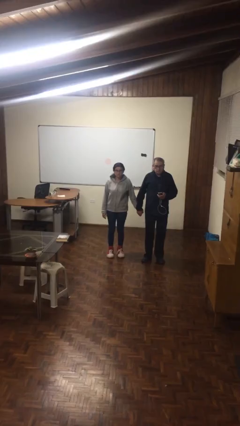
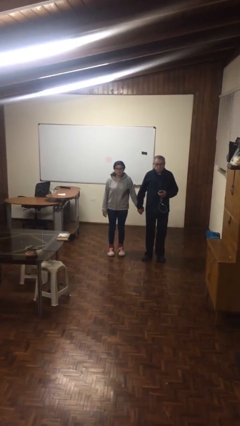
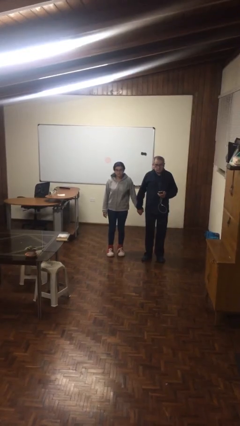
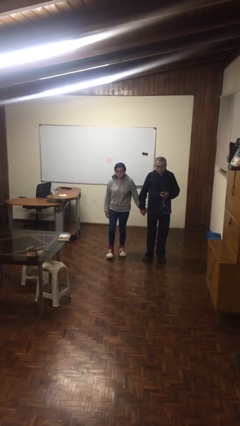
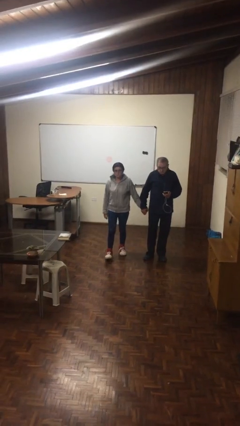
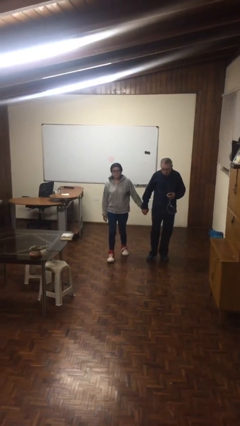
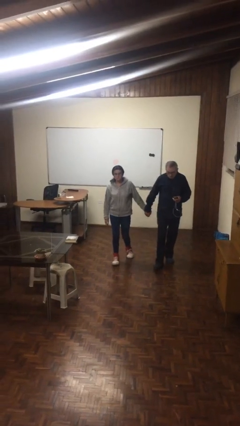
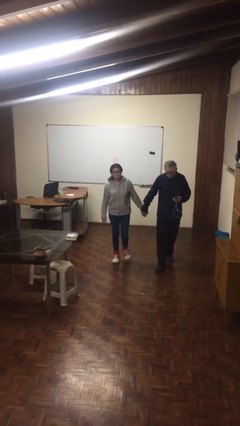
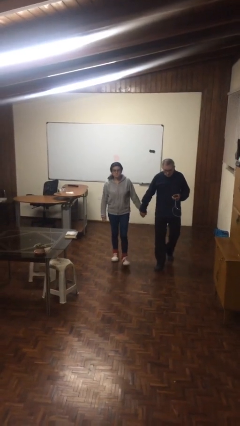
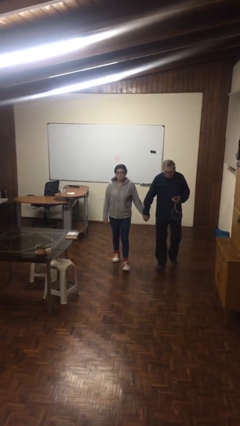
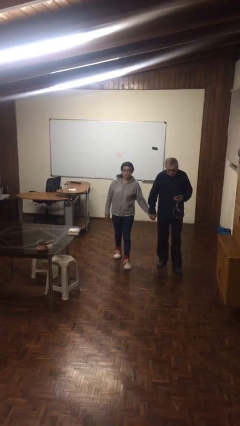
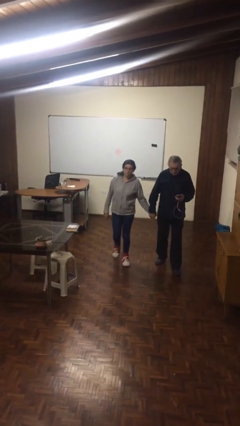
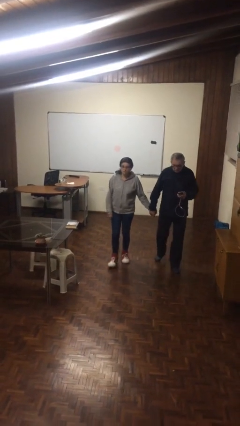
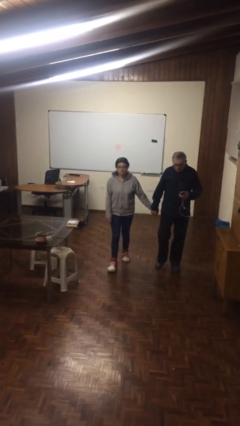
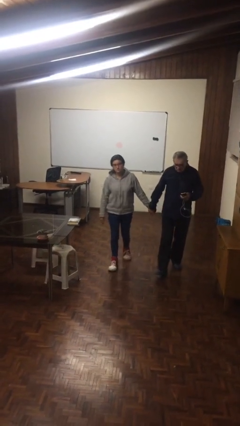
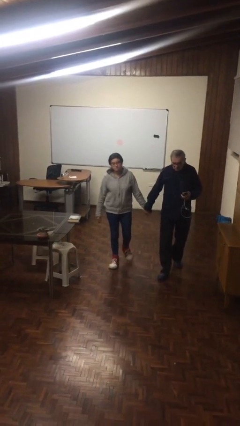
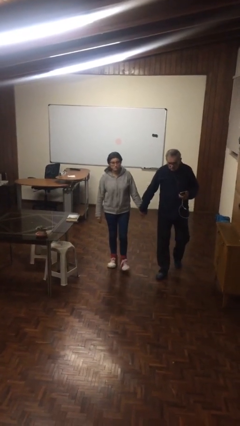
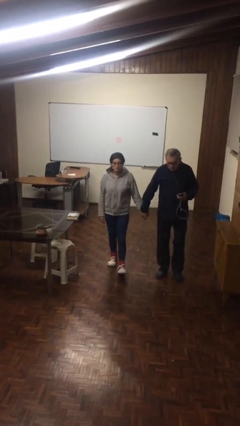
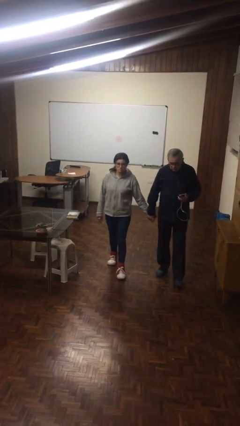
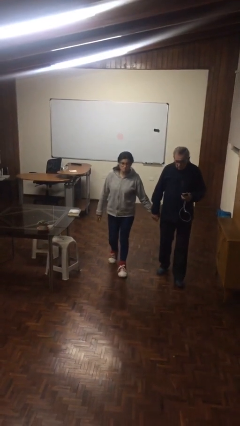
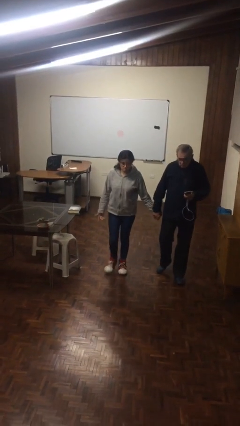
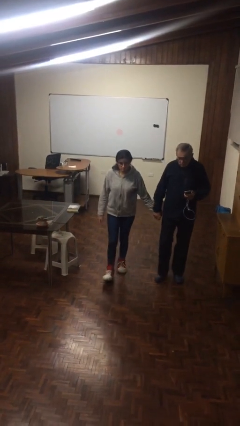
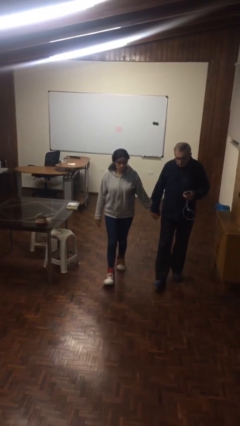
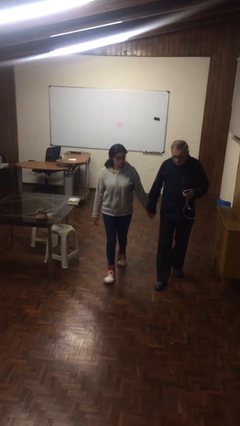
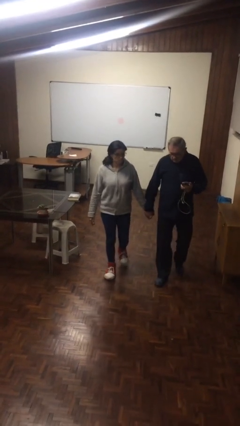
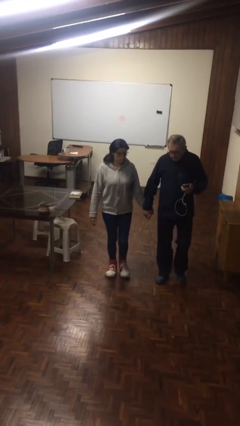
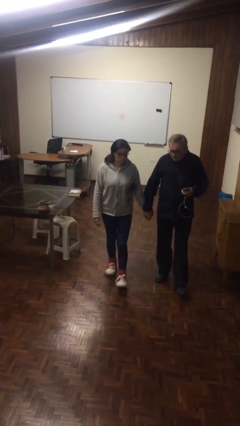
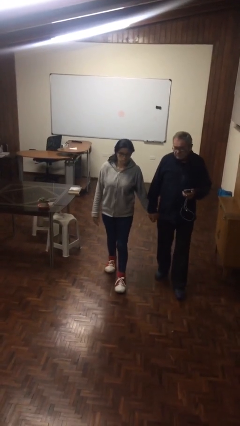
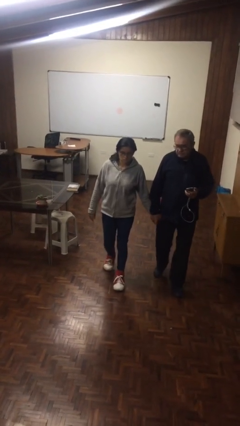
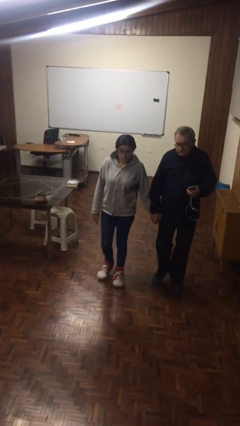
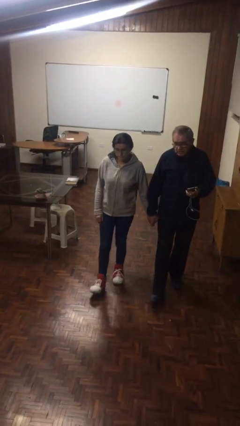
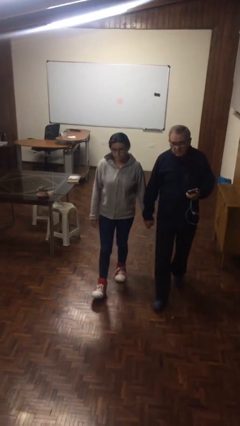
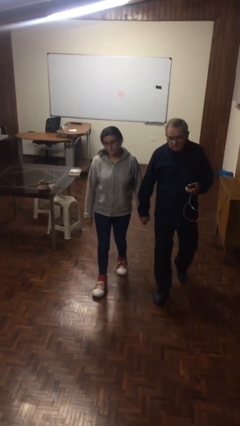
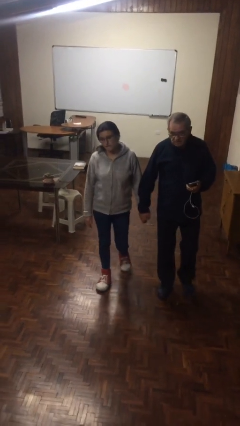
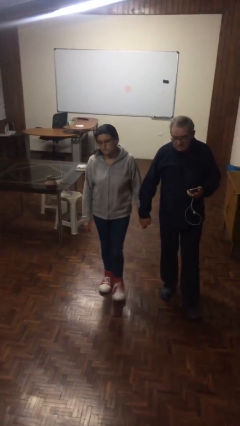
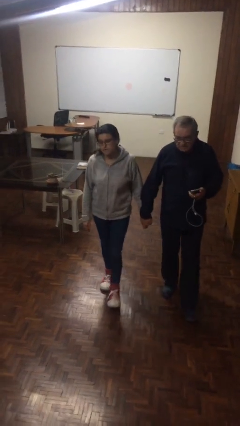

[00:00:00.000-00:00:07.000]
person holds hand

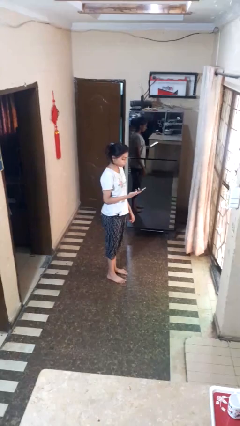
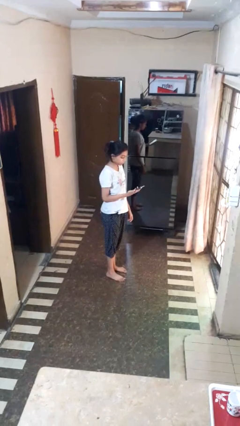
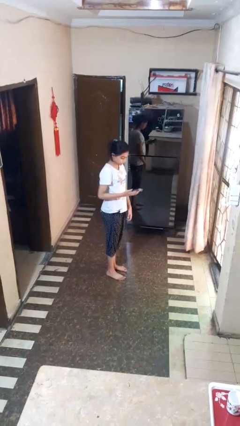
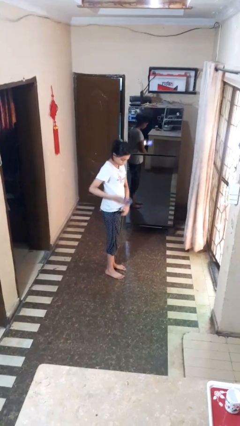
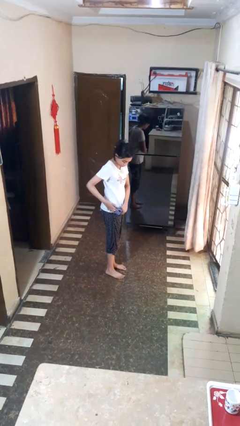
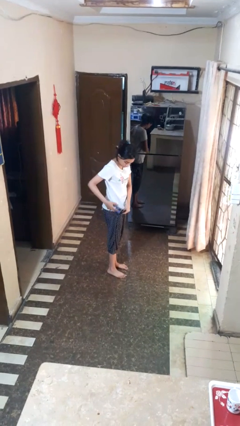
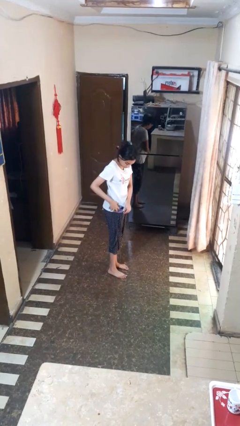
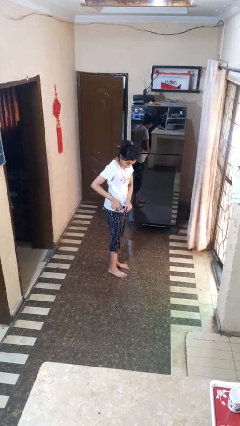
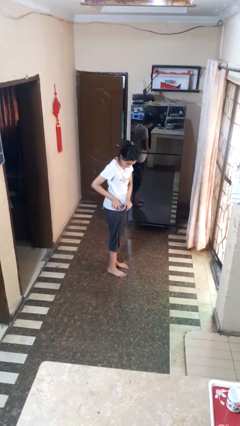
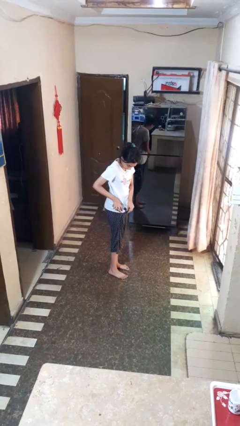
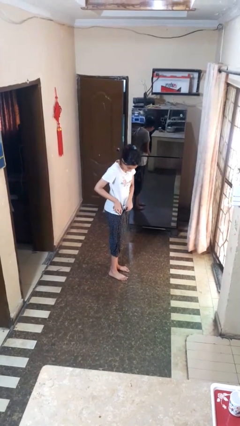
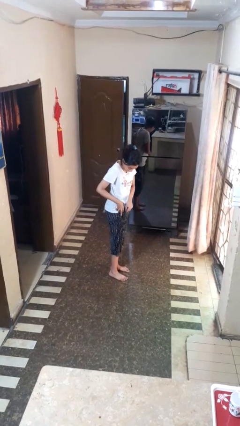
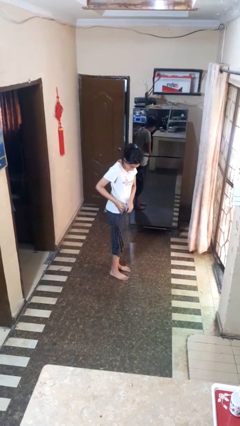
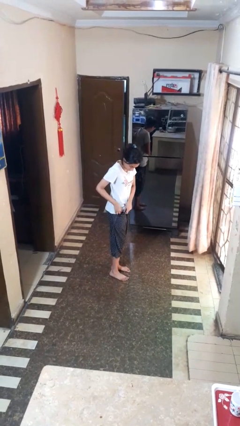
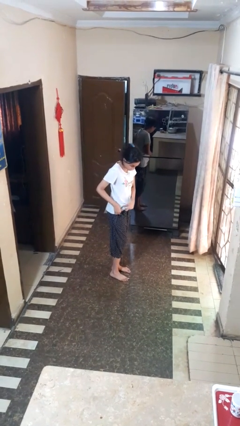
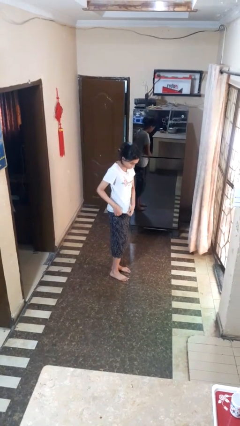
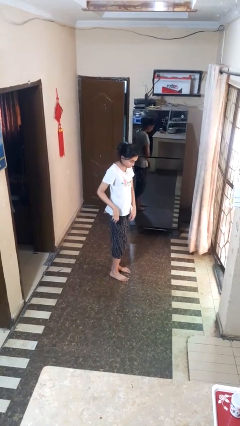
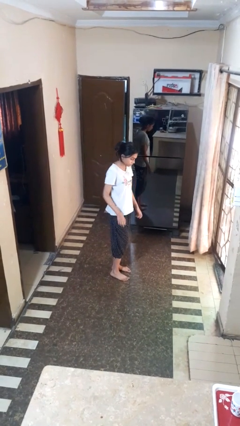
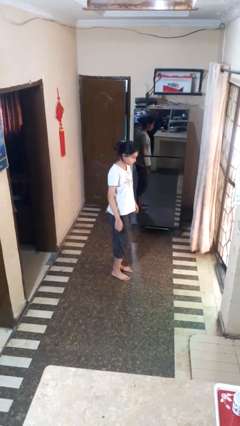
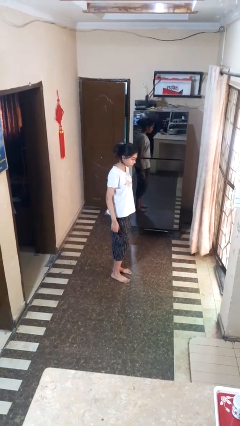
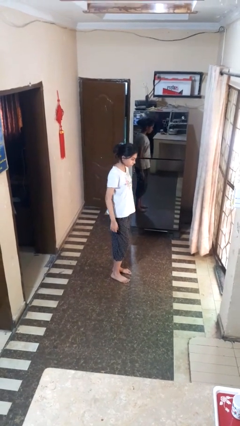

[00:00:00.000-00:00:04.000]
person puts phone into pocket

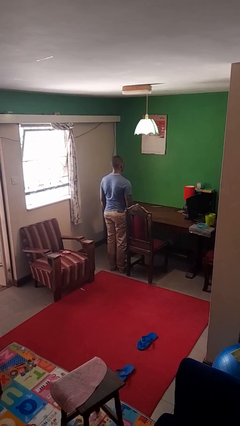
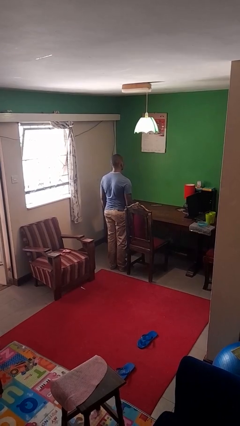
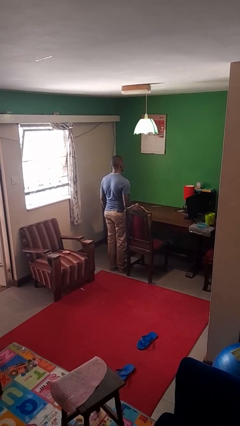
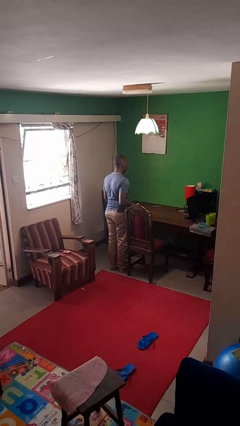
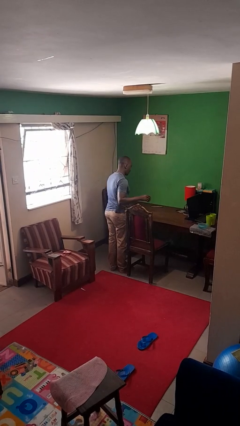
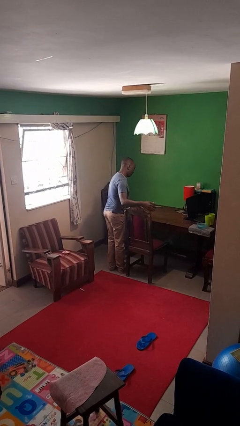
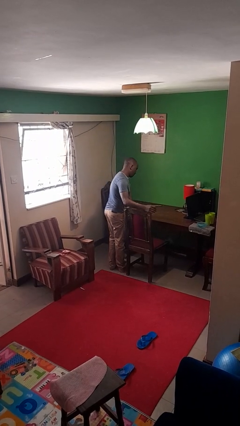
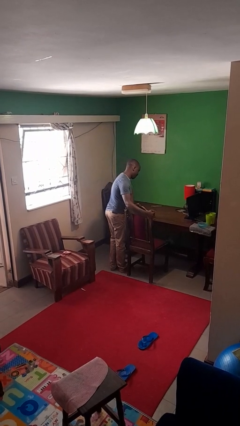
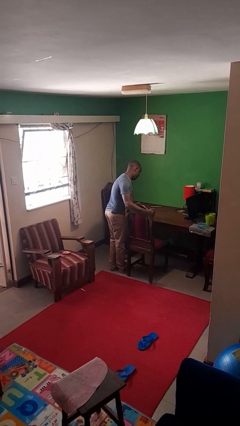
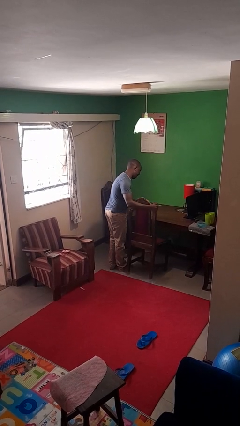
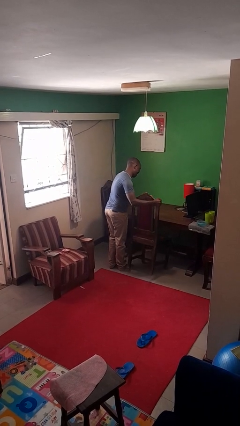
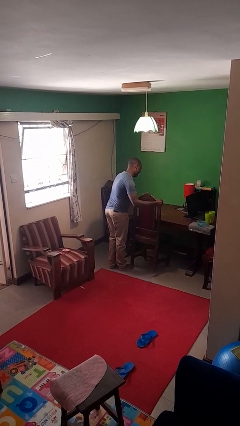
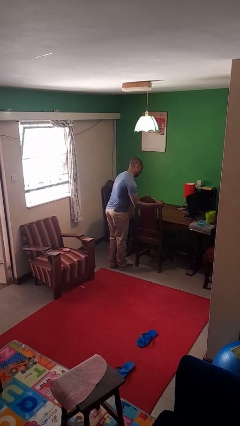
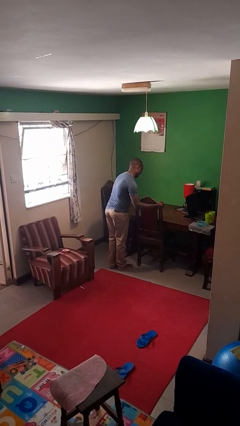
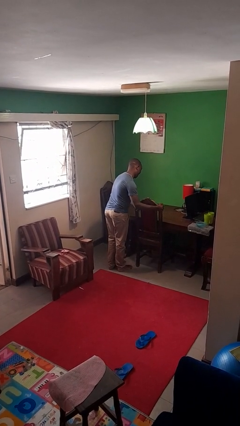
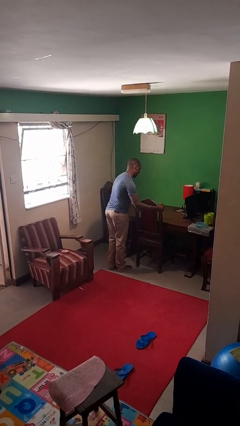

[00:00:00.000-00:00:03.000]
person pushes in chair

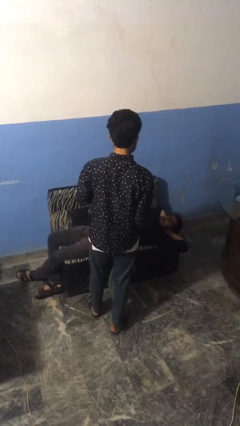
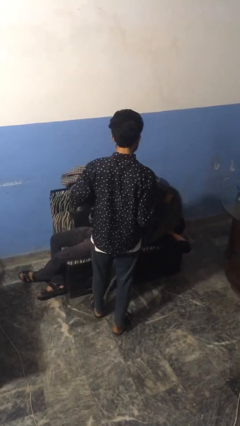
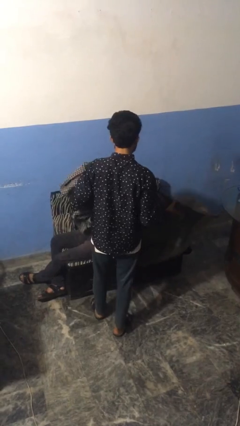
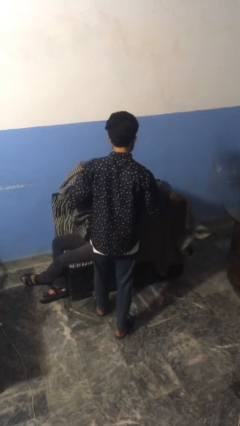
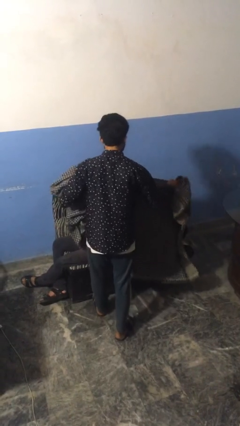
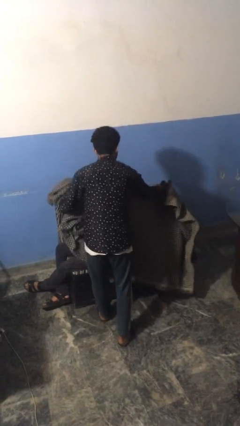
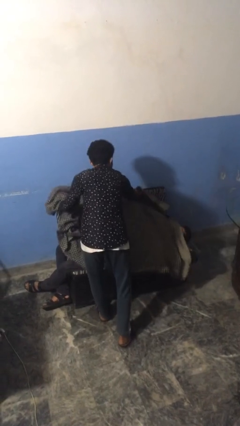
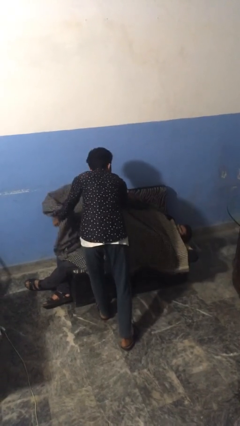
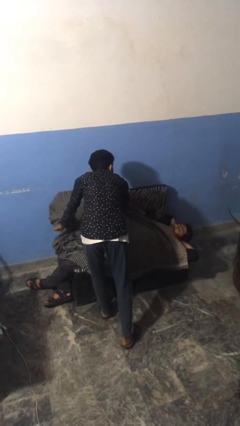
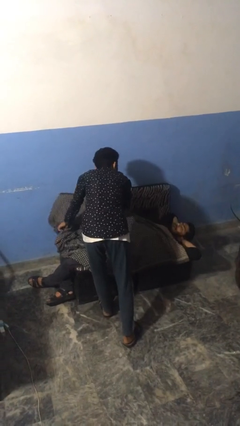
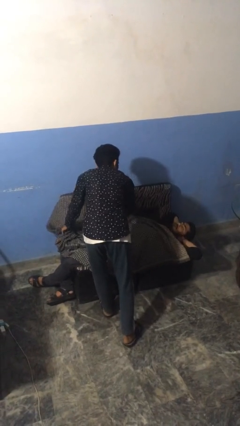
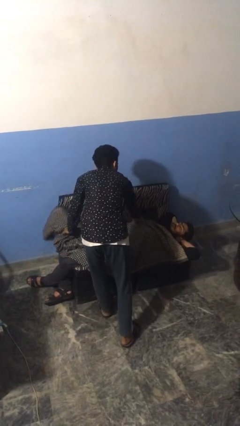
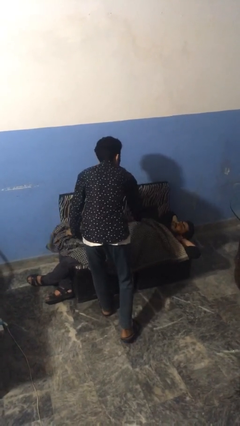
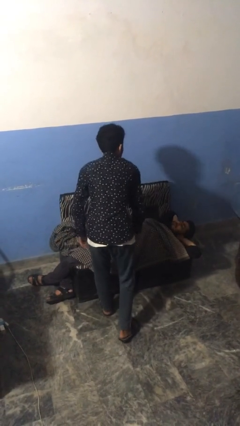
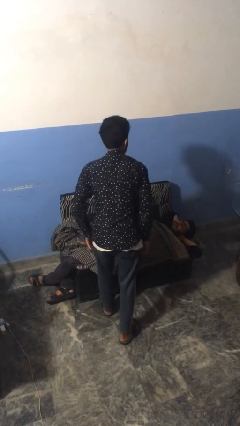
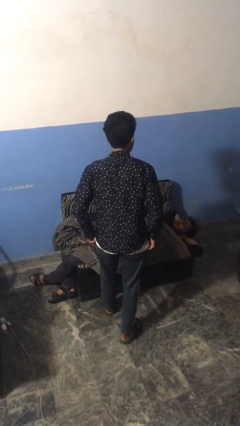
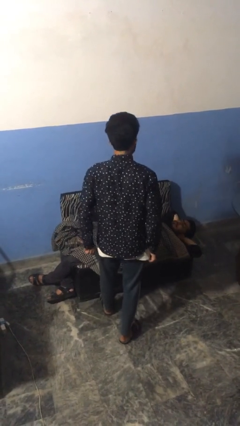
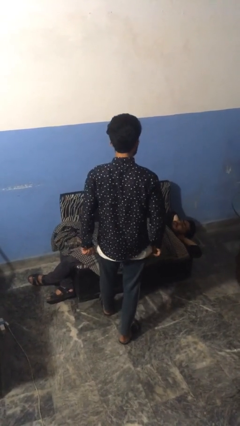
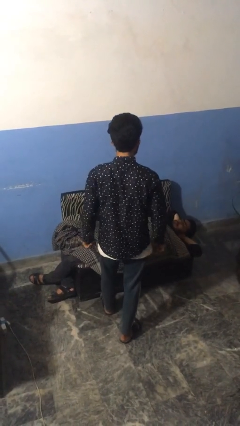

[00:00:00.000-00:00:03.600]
person covers friend with blanket

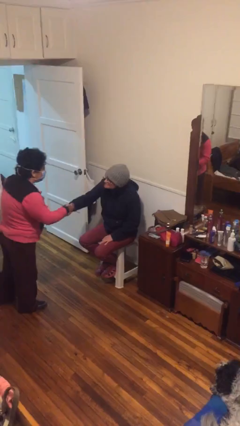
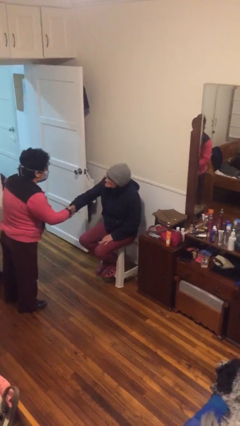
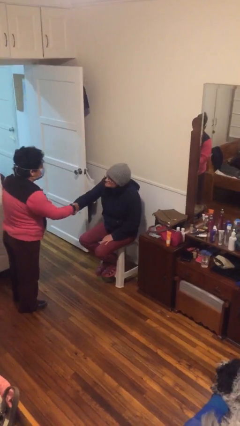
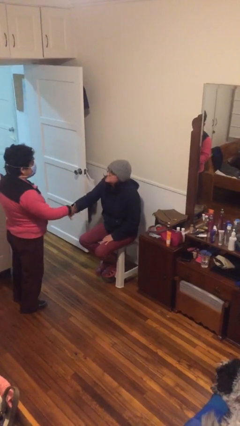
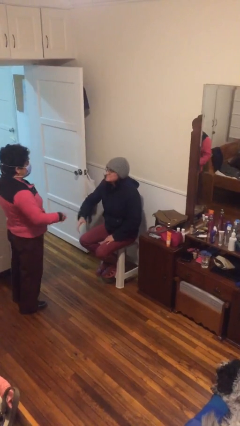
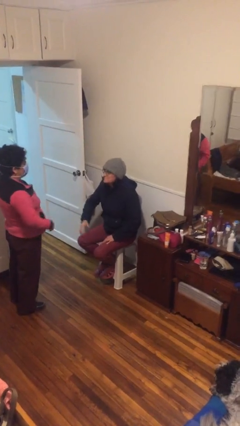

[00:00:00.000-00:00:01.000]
person shakes hand
